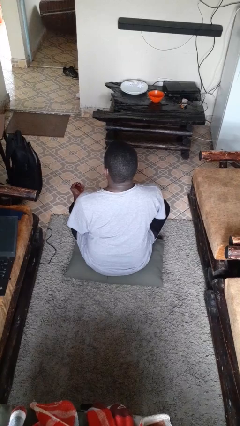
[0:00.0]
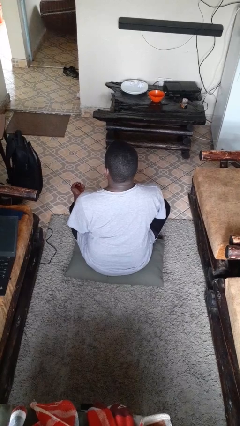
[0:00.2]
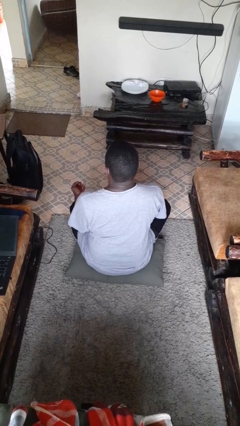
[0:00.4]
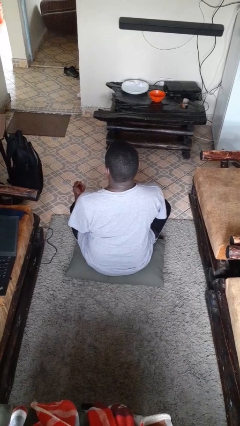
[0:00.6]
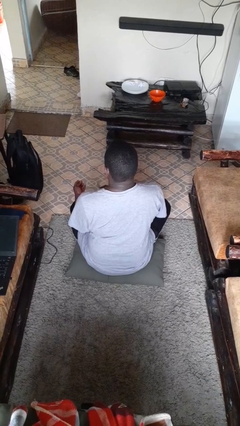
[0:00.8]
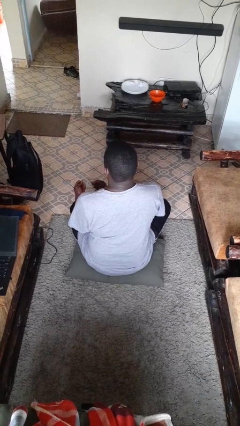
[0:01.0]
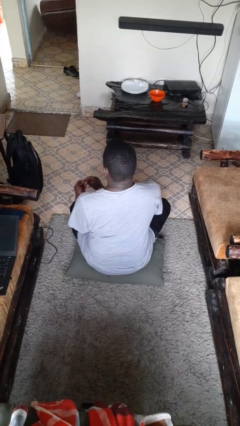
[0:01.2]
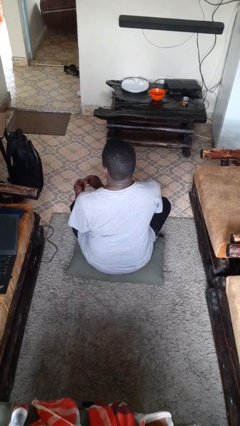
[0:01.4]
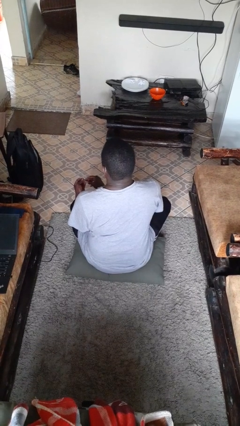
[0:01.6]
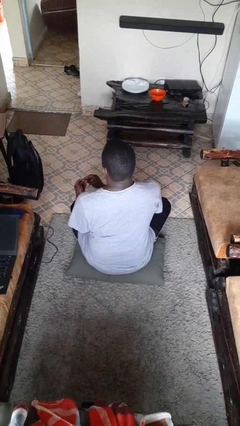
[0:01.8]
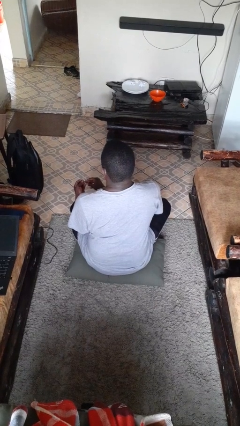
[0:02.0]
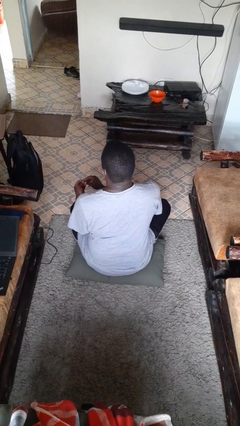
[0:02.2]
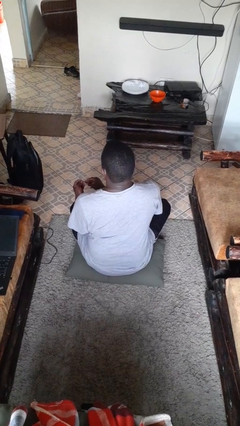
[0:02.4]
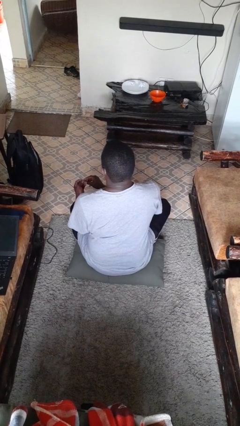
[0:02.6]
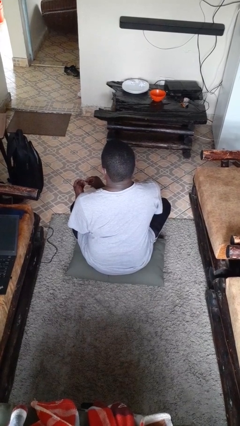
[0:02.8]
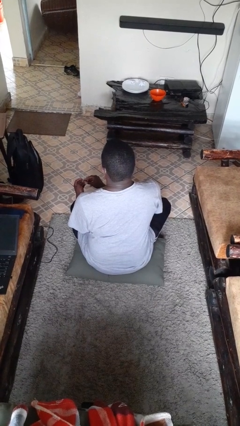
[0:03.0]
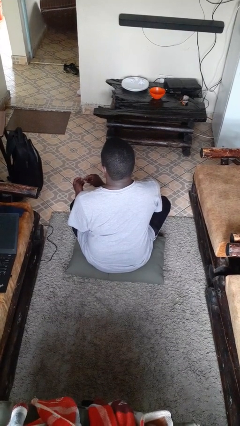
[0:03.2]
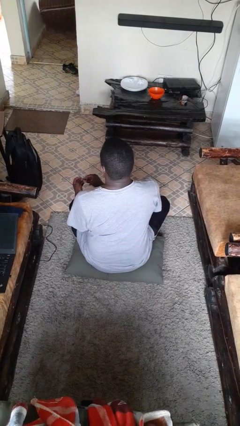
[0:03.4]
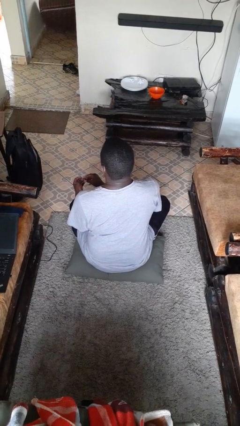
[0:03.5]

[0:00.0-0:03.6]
person files fingernails

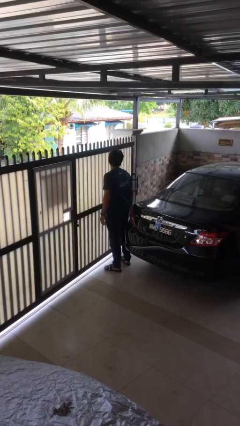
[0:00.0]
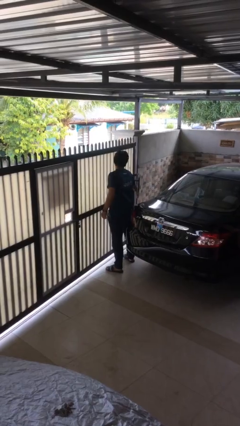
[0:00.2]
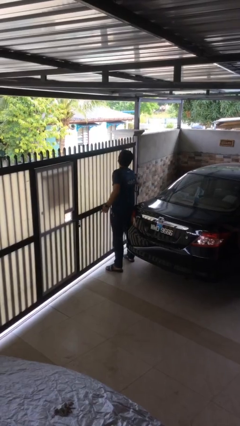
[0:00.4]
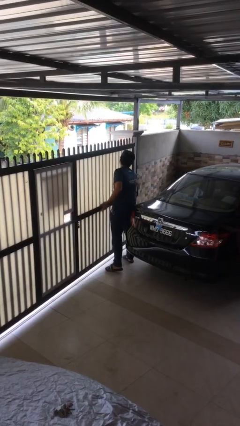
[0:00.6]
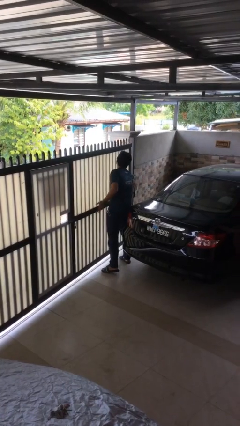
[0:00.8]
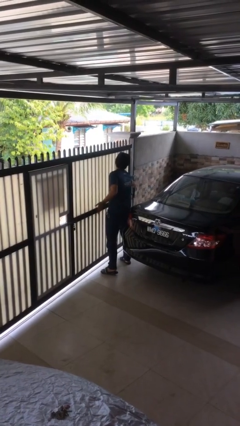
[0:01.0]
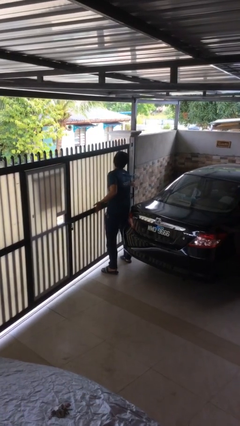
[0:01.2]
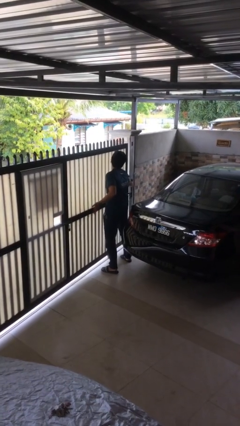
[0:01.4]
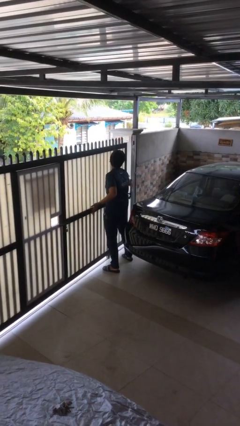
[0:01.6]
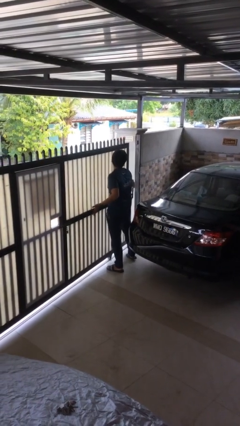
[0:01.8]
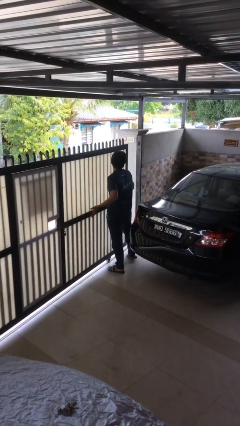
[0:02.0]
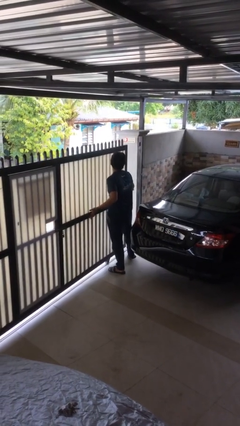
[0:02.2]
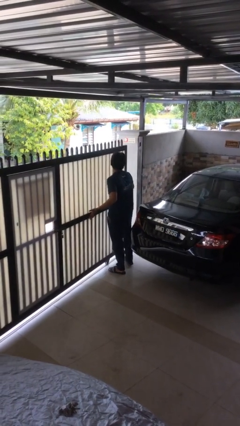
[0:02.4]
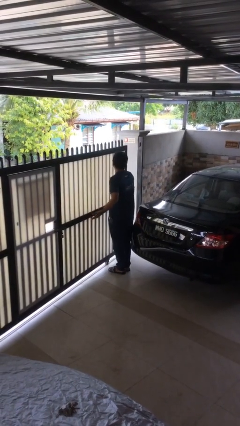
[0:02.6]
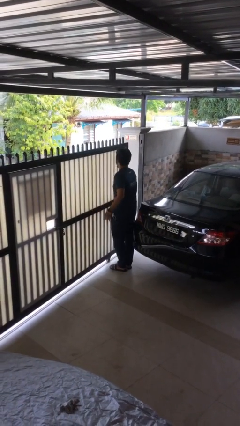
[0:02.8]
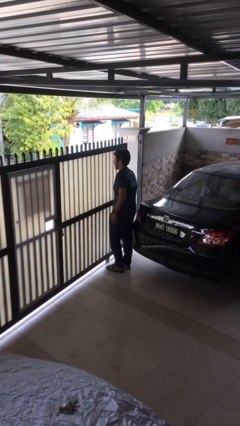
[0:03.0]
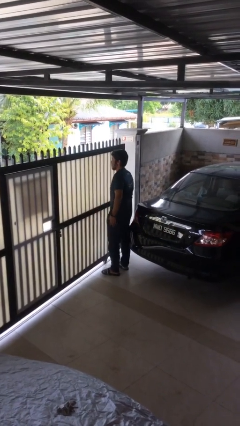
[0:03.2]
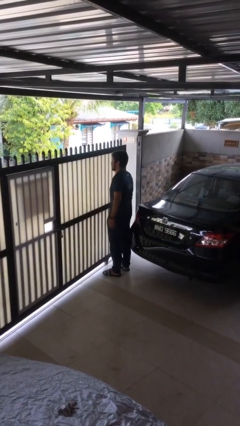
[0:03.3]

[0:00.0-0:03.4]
person opens sliding door

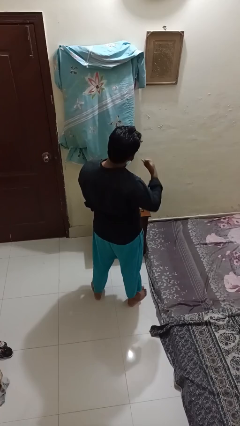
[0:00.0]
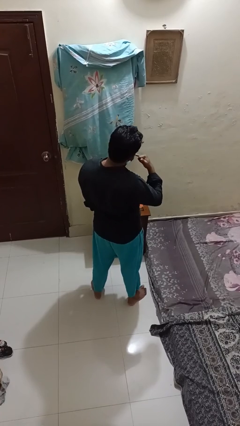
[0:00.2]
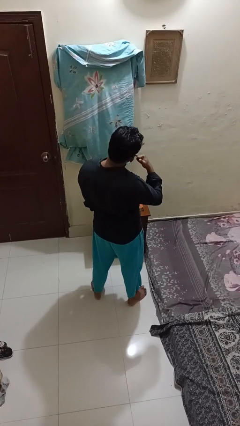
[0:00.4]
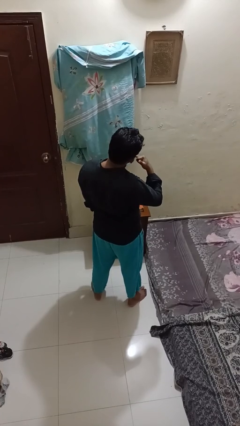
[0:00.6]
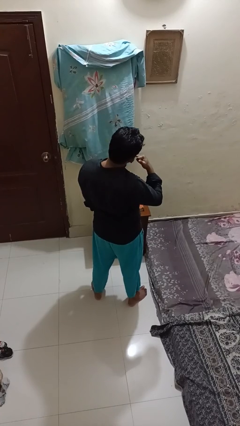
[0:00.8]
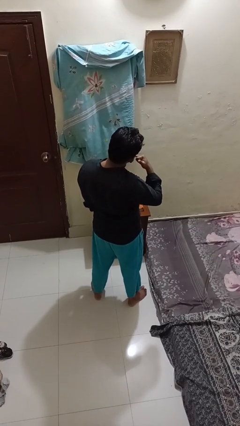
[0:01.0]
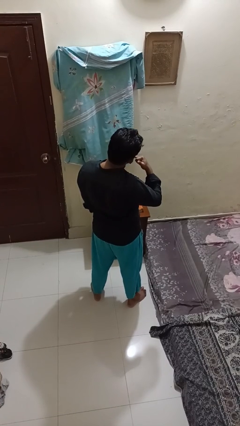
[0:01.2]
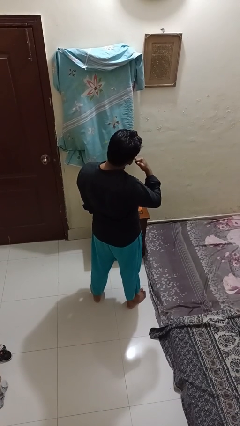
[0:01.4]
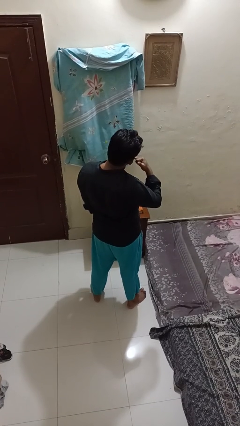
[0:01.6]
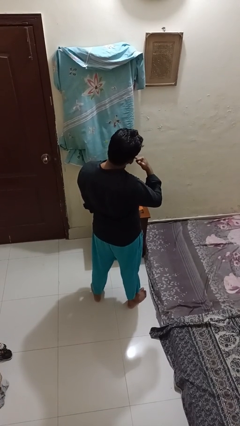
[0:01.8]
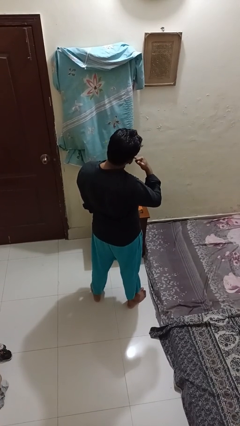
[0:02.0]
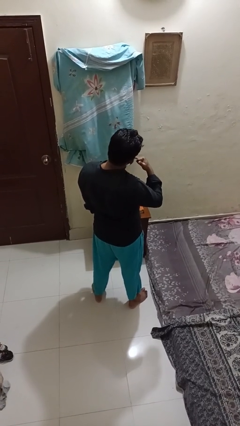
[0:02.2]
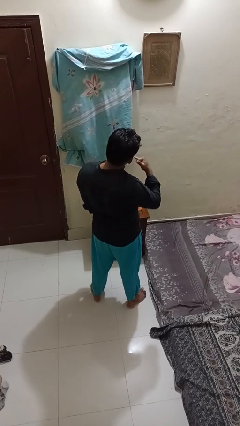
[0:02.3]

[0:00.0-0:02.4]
person gestures call me

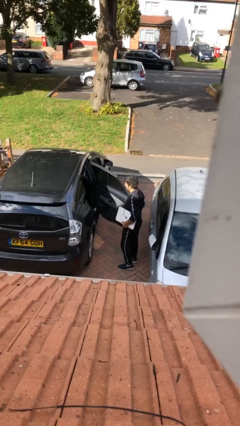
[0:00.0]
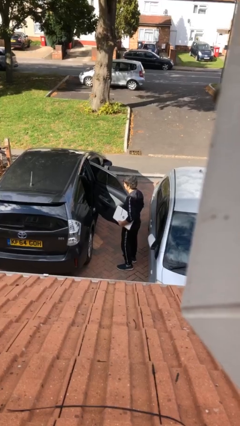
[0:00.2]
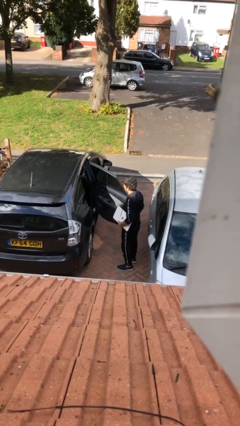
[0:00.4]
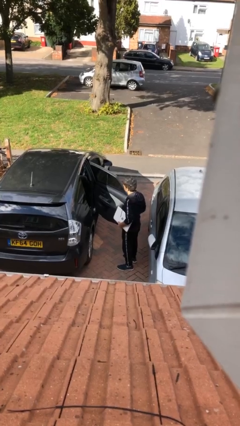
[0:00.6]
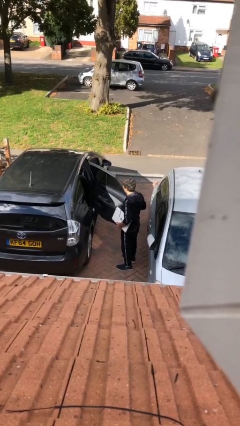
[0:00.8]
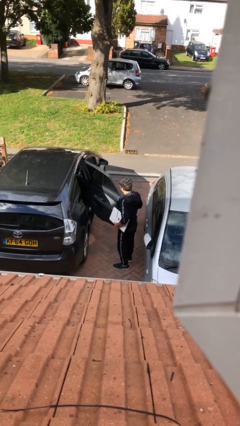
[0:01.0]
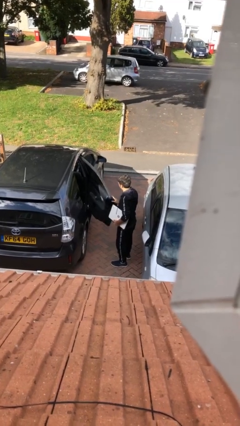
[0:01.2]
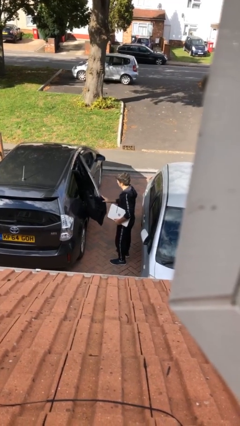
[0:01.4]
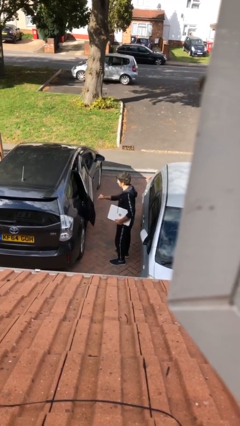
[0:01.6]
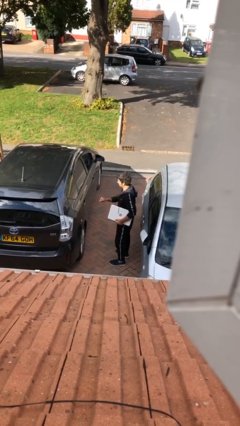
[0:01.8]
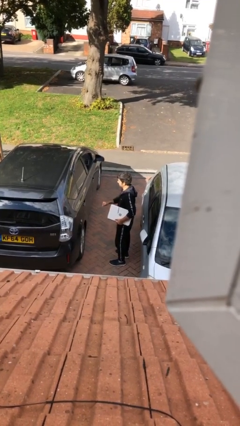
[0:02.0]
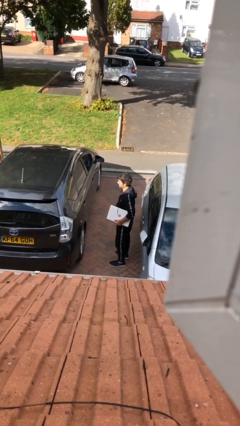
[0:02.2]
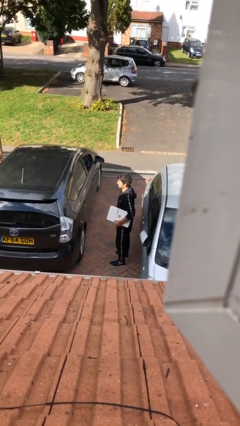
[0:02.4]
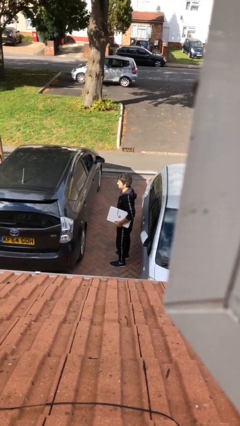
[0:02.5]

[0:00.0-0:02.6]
person closes car door

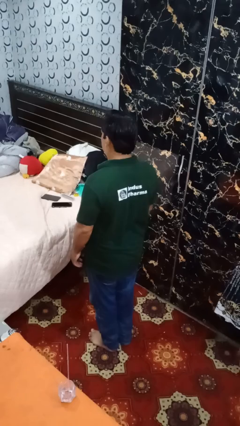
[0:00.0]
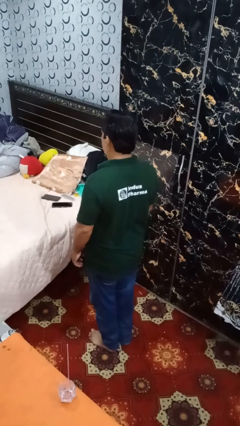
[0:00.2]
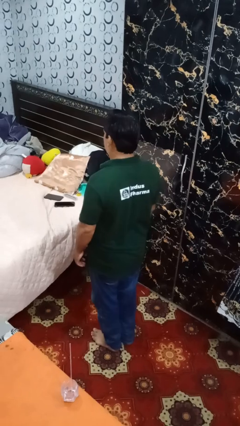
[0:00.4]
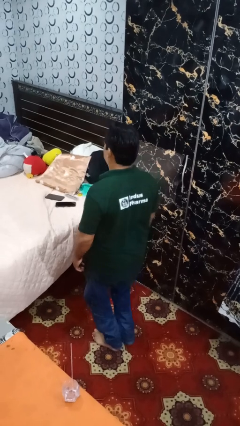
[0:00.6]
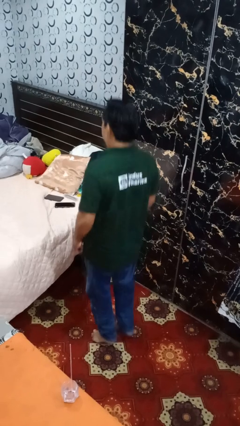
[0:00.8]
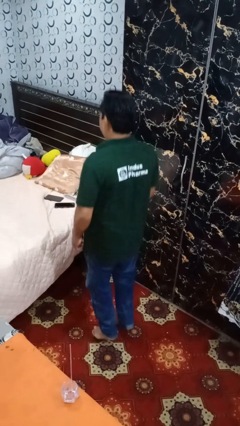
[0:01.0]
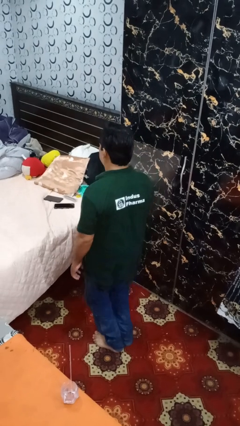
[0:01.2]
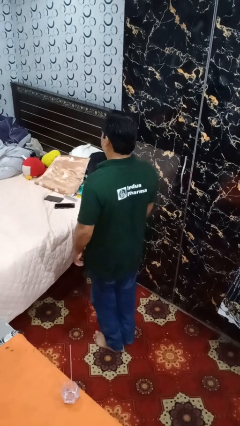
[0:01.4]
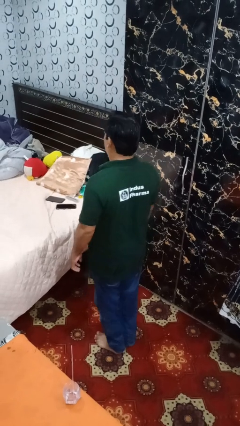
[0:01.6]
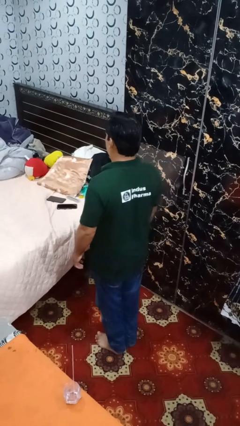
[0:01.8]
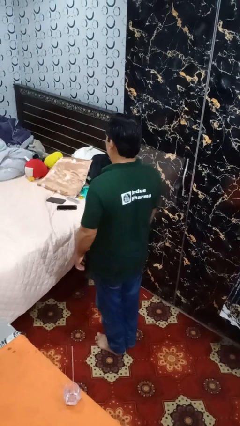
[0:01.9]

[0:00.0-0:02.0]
person jumps

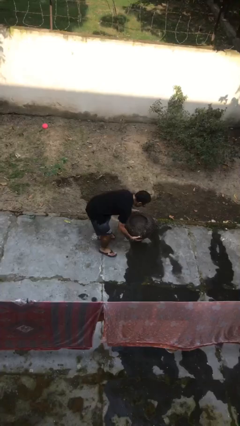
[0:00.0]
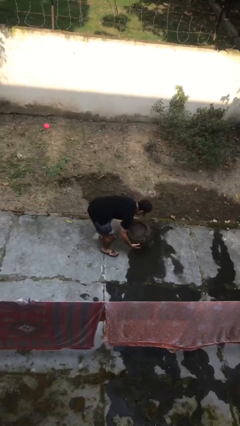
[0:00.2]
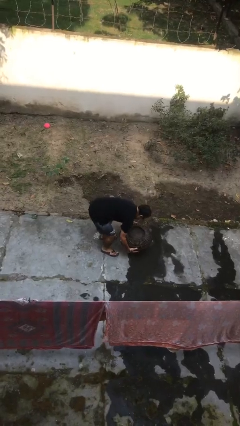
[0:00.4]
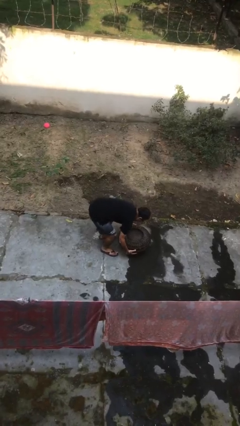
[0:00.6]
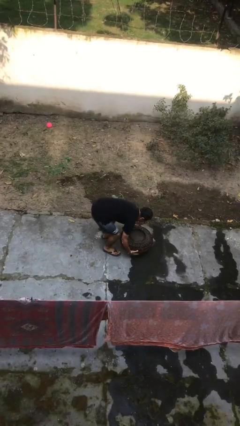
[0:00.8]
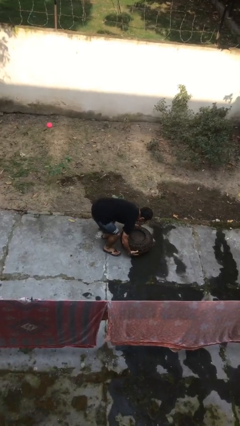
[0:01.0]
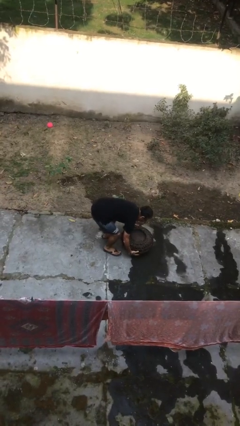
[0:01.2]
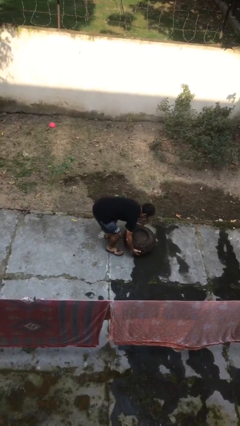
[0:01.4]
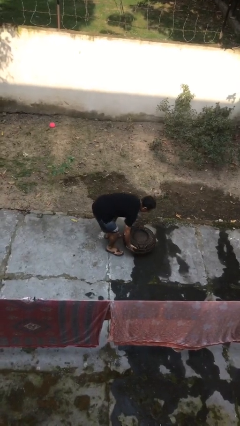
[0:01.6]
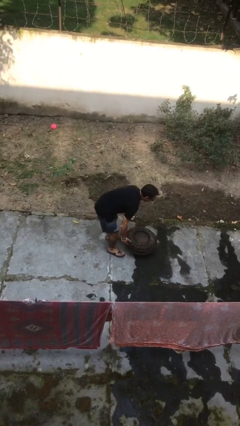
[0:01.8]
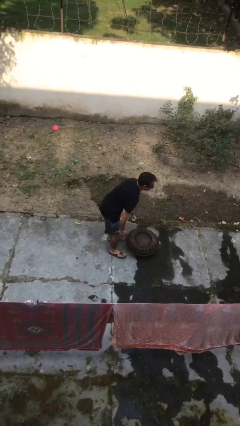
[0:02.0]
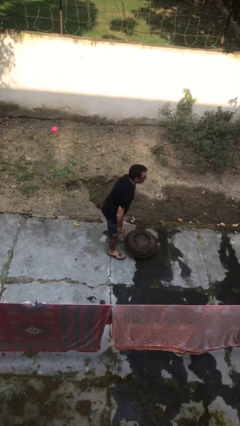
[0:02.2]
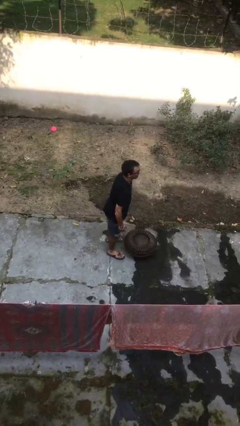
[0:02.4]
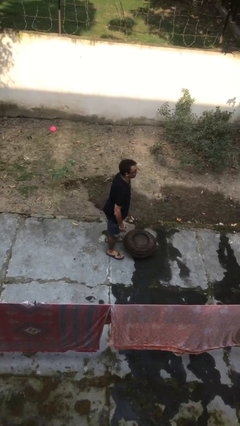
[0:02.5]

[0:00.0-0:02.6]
person puts down object on floor
